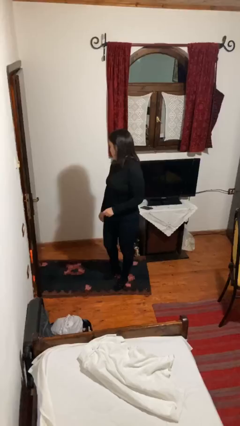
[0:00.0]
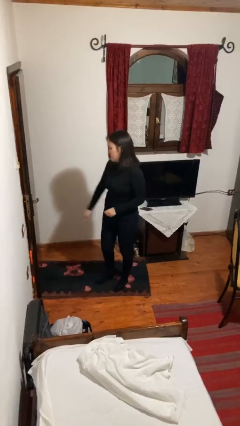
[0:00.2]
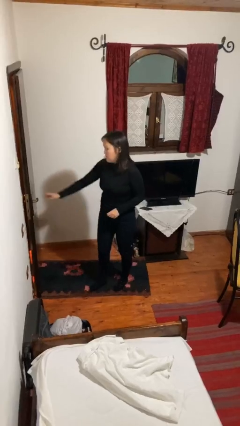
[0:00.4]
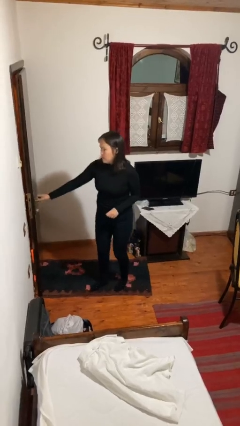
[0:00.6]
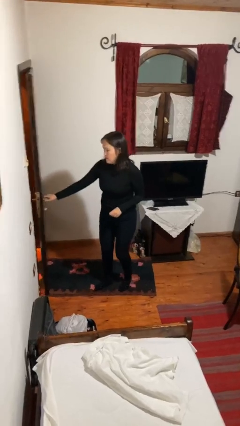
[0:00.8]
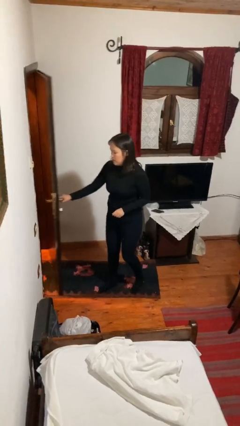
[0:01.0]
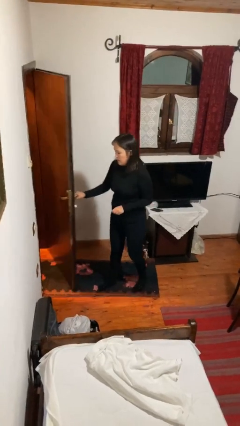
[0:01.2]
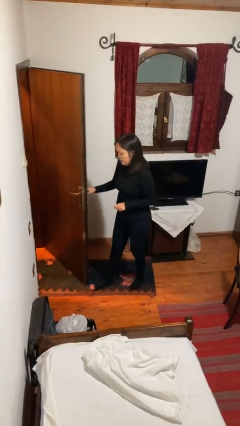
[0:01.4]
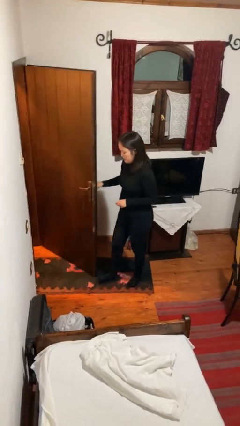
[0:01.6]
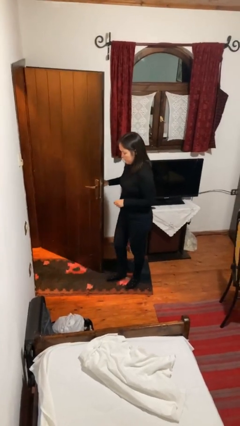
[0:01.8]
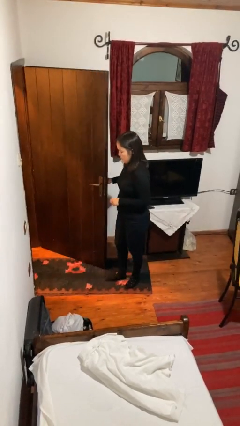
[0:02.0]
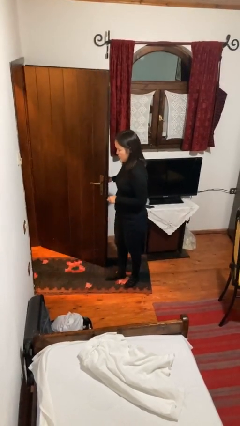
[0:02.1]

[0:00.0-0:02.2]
person opens facility door

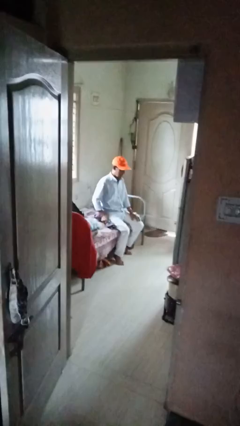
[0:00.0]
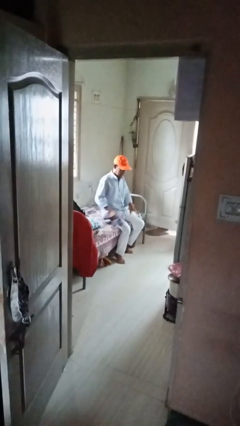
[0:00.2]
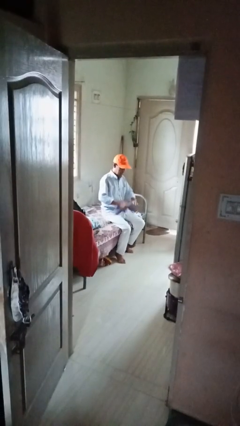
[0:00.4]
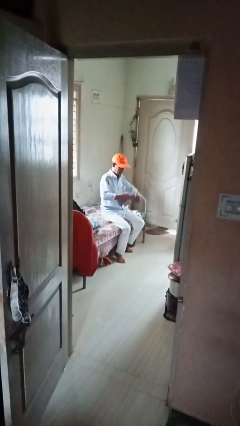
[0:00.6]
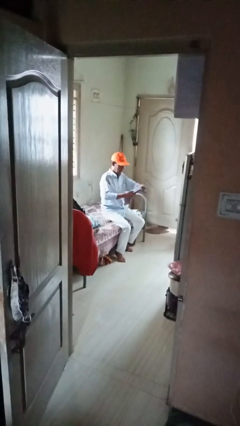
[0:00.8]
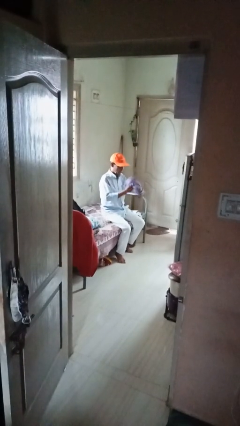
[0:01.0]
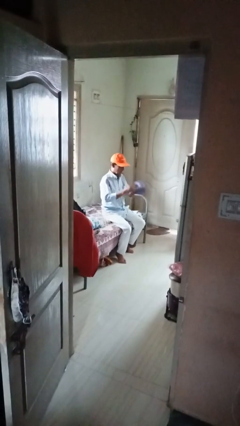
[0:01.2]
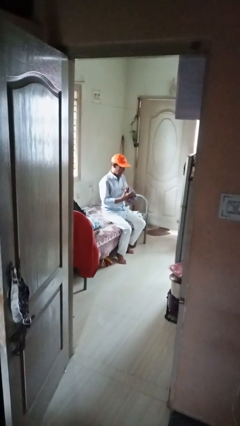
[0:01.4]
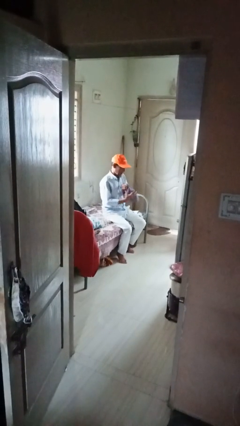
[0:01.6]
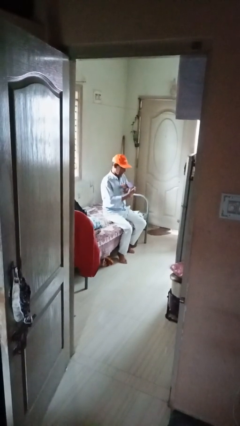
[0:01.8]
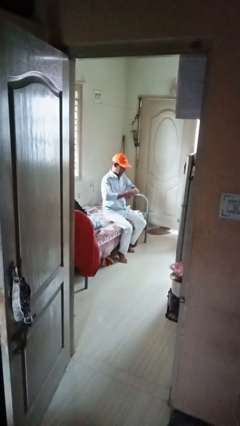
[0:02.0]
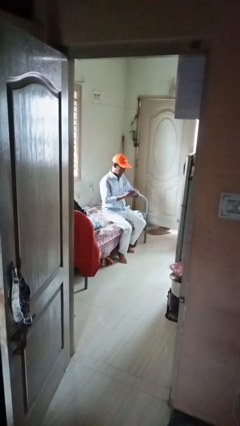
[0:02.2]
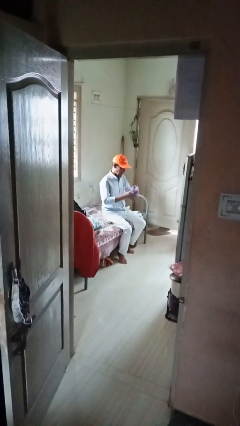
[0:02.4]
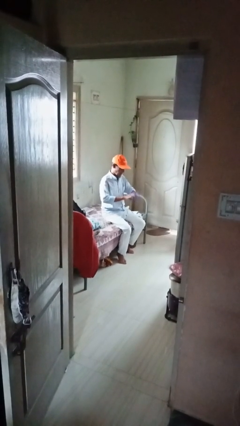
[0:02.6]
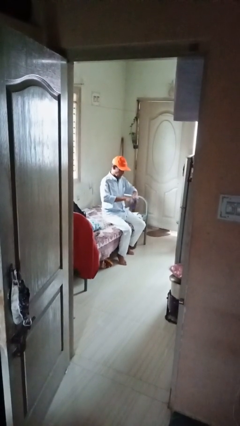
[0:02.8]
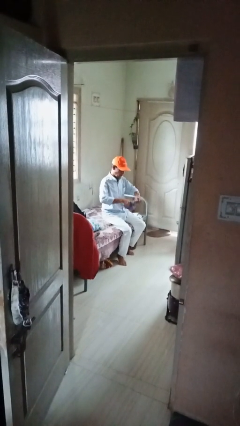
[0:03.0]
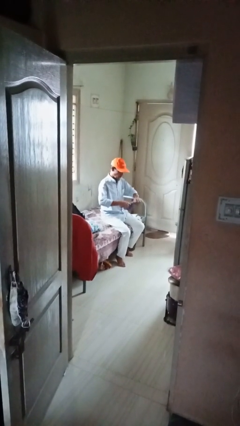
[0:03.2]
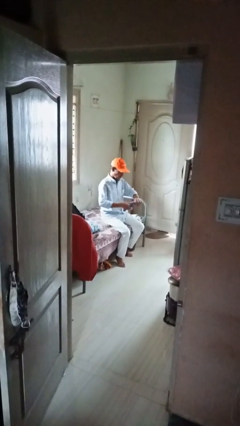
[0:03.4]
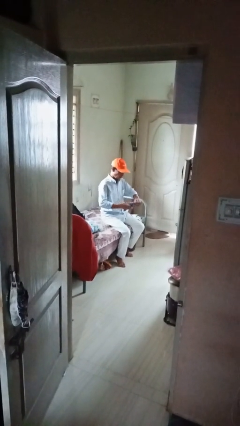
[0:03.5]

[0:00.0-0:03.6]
person squeezes object

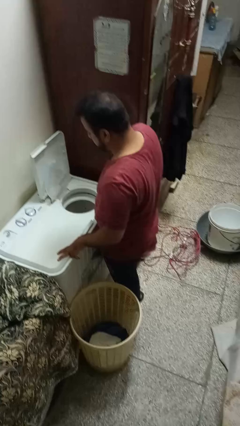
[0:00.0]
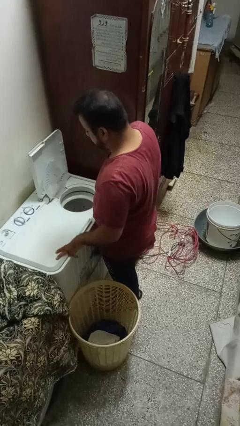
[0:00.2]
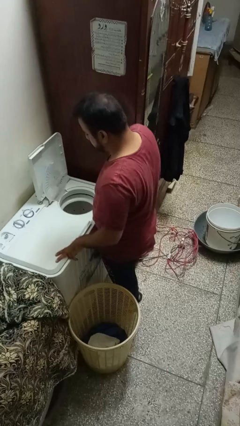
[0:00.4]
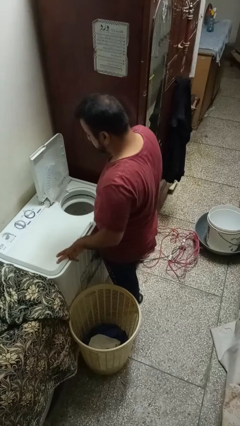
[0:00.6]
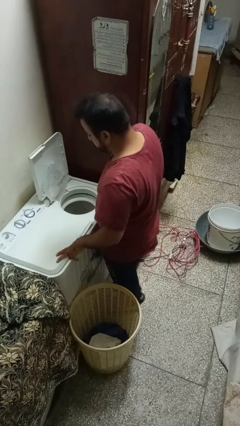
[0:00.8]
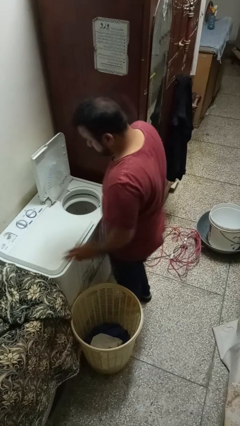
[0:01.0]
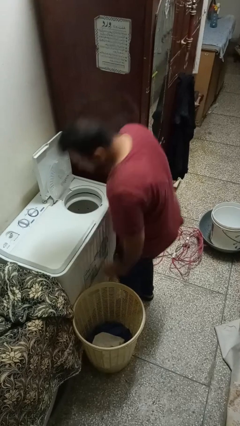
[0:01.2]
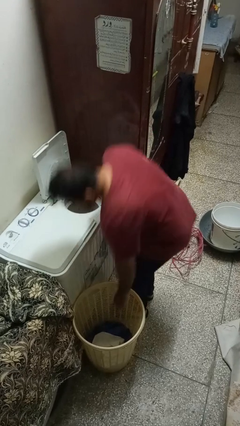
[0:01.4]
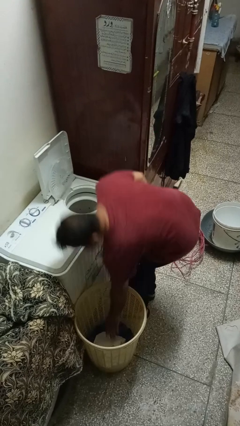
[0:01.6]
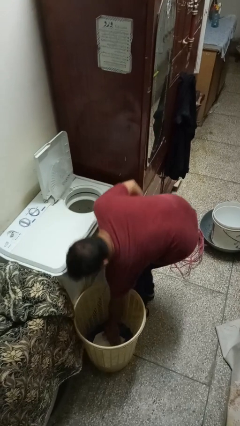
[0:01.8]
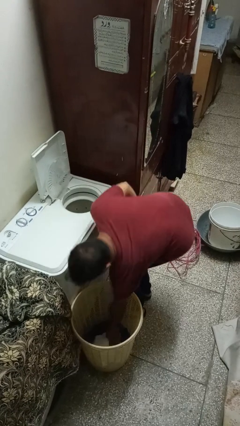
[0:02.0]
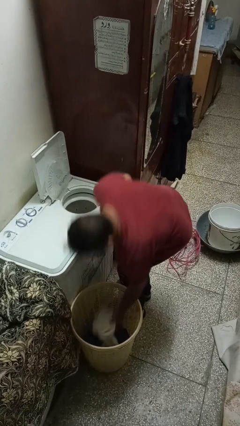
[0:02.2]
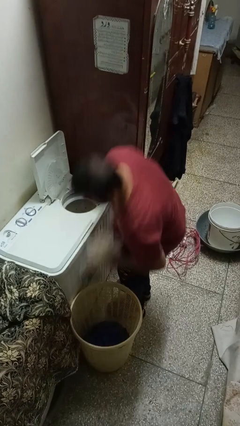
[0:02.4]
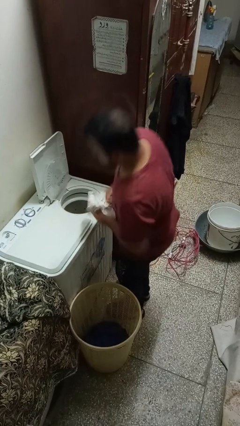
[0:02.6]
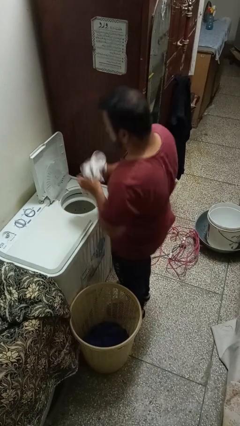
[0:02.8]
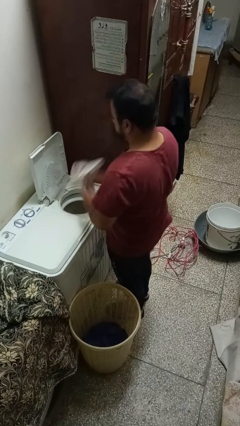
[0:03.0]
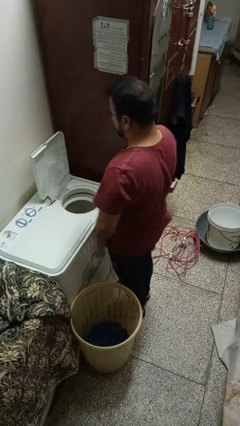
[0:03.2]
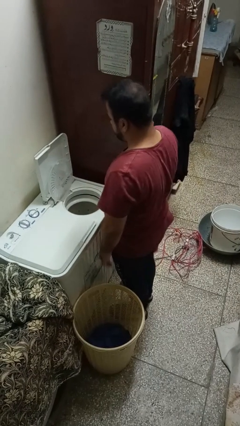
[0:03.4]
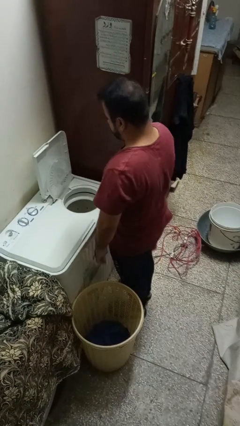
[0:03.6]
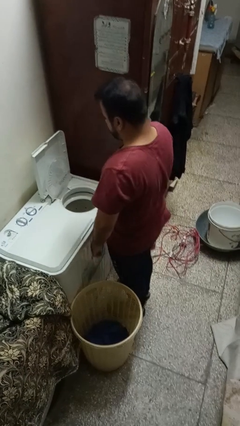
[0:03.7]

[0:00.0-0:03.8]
person loads dryer

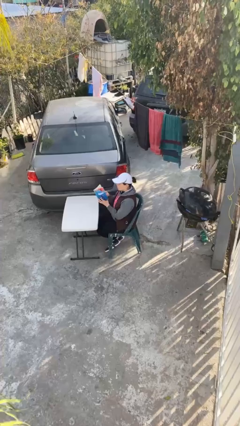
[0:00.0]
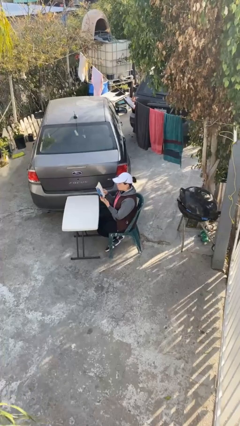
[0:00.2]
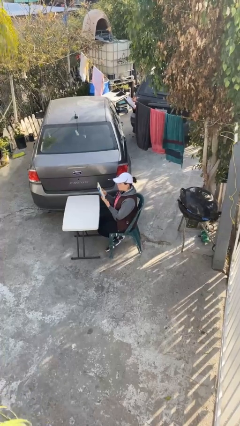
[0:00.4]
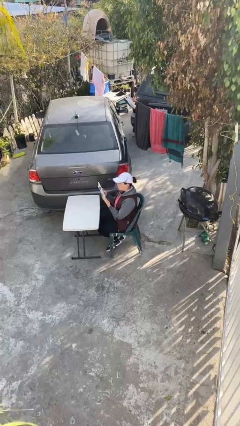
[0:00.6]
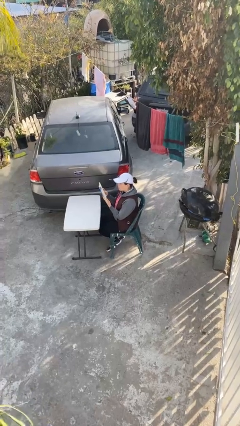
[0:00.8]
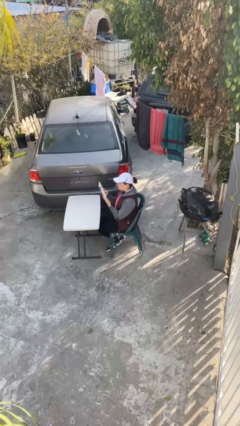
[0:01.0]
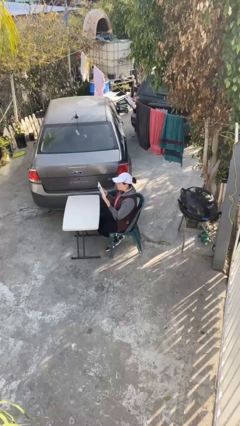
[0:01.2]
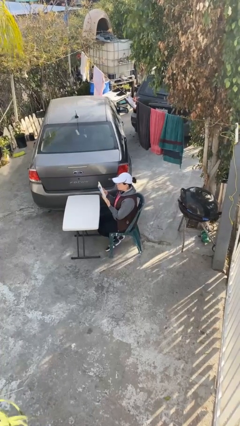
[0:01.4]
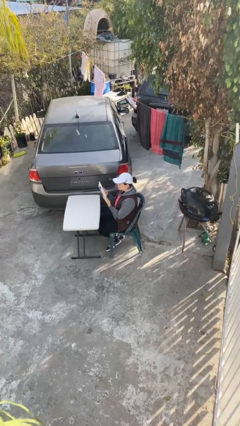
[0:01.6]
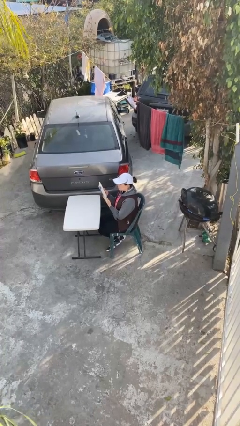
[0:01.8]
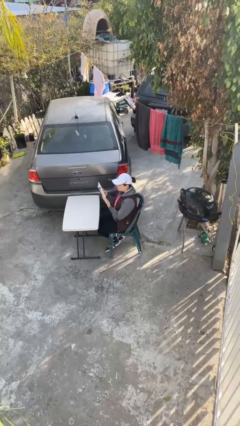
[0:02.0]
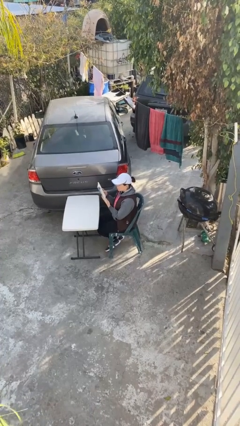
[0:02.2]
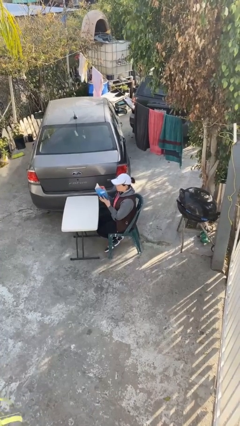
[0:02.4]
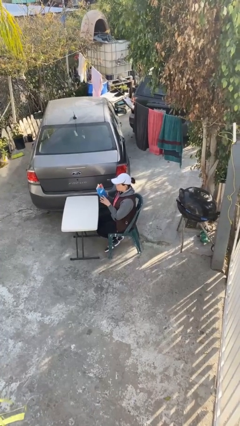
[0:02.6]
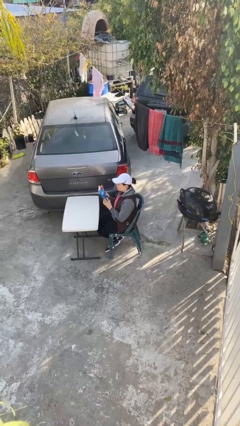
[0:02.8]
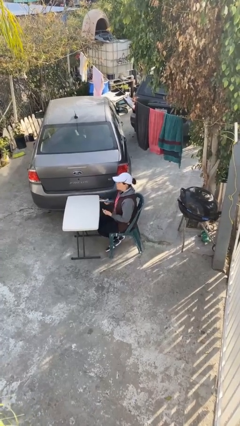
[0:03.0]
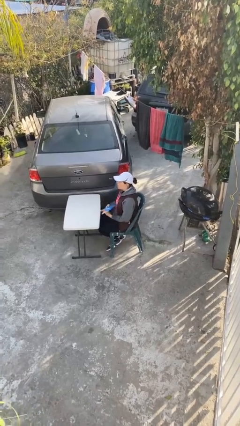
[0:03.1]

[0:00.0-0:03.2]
person reads document

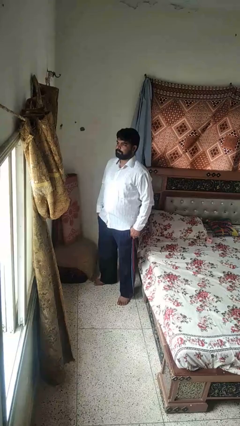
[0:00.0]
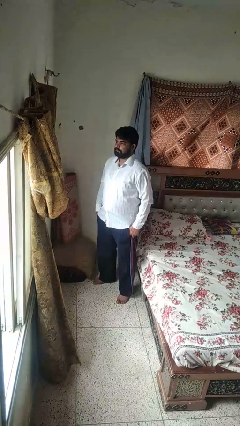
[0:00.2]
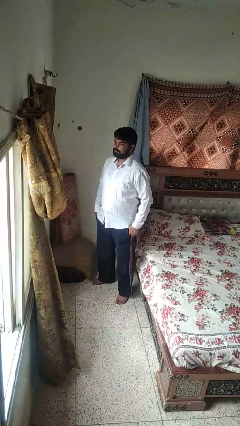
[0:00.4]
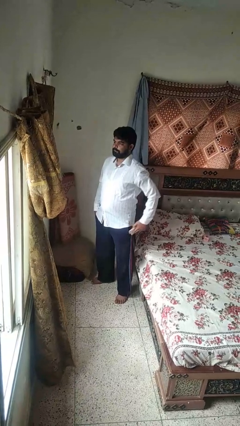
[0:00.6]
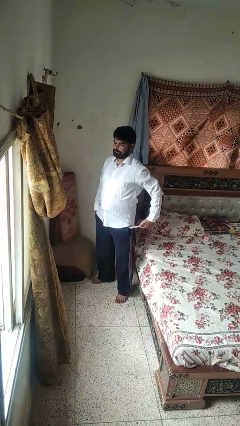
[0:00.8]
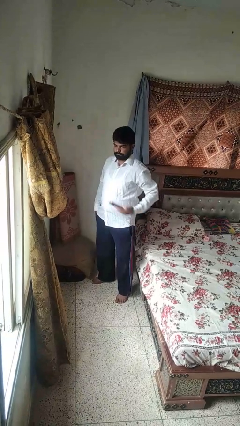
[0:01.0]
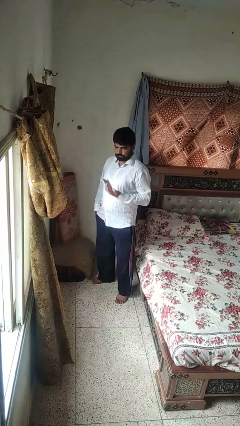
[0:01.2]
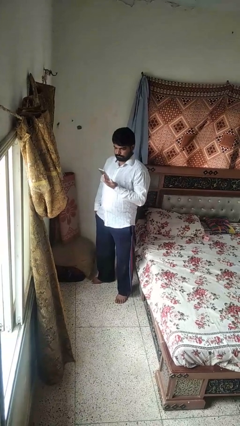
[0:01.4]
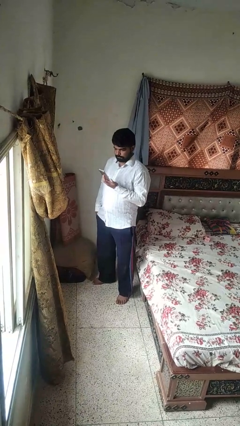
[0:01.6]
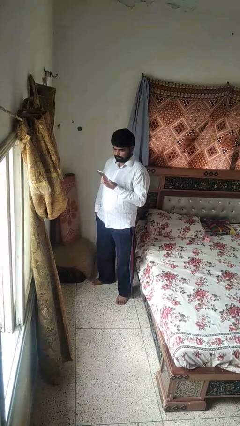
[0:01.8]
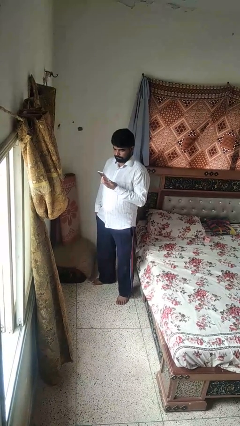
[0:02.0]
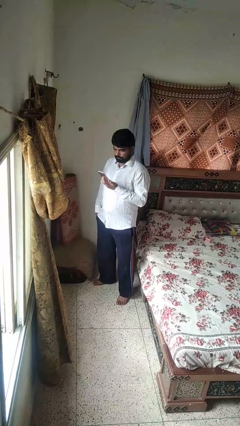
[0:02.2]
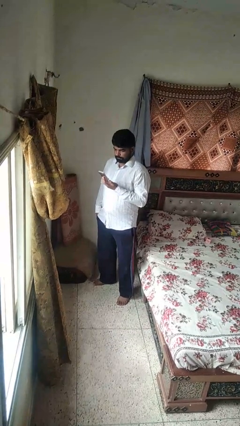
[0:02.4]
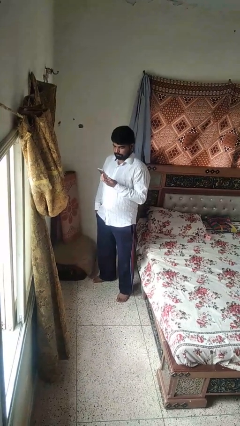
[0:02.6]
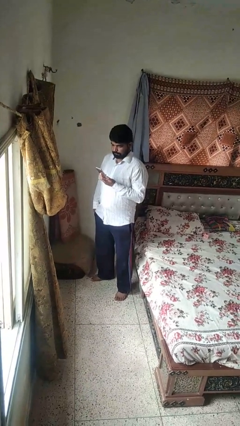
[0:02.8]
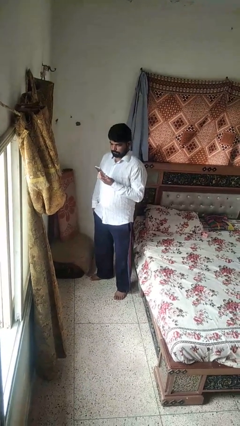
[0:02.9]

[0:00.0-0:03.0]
person takes phone from pocket

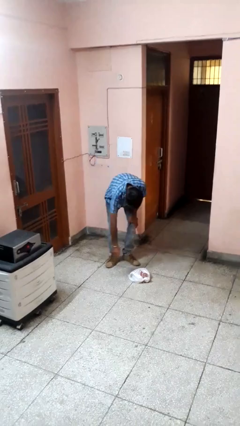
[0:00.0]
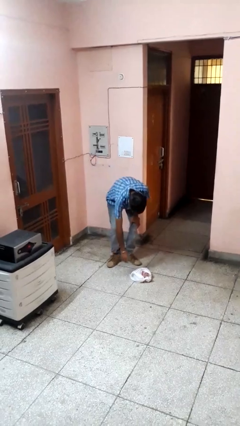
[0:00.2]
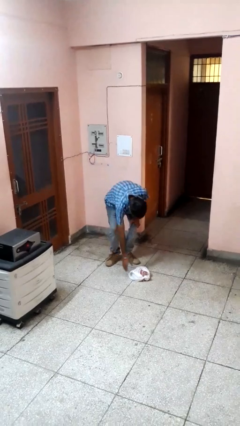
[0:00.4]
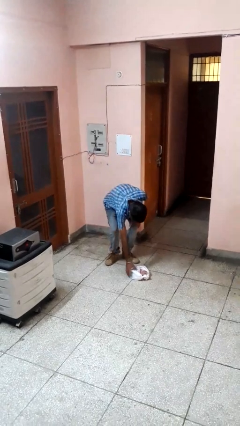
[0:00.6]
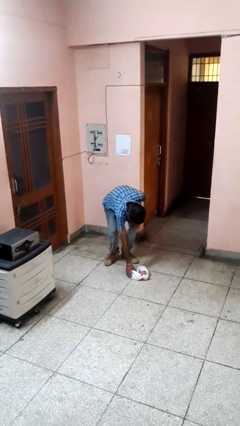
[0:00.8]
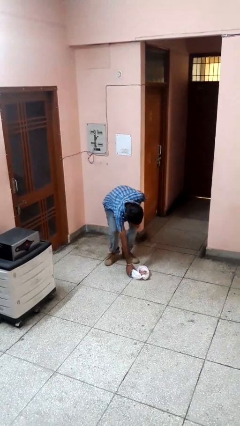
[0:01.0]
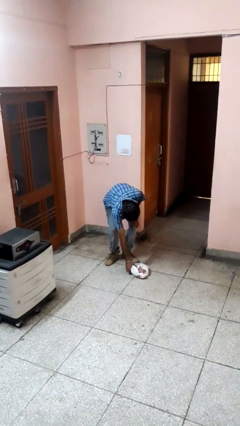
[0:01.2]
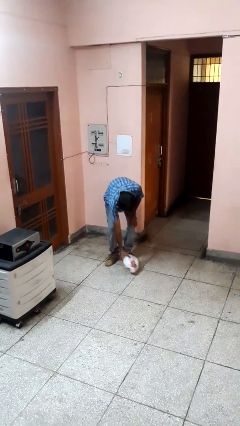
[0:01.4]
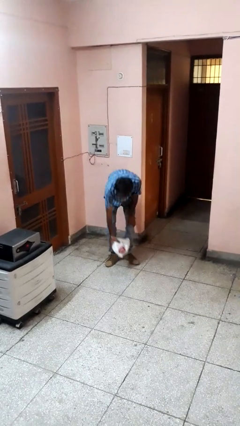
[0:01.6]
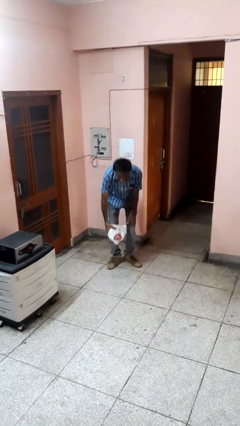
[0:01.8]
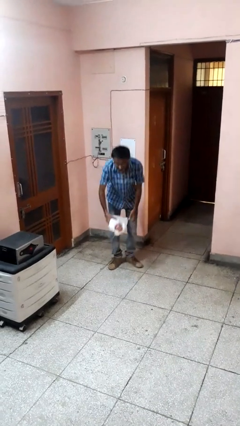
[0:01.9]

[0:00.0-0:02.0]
person picks up object from floor
